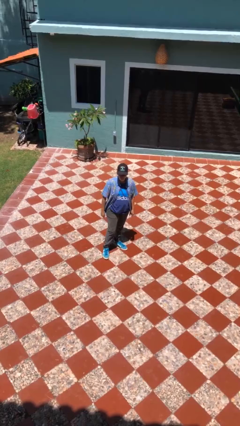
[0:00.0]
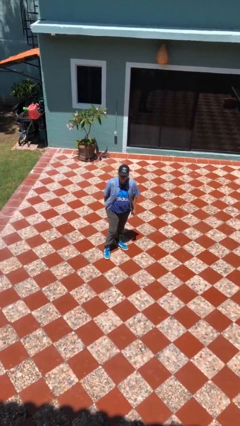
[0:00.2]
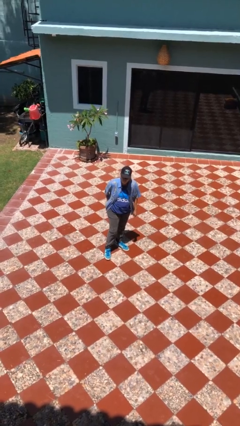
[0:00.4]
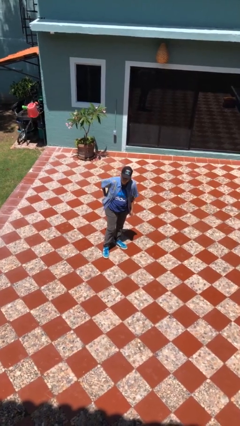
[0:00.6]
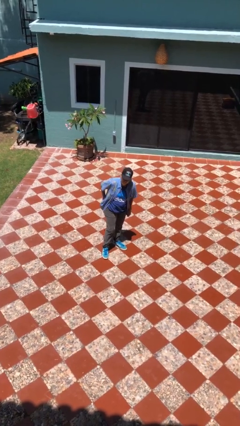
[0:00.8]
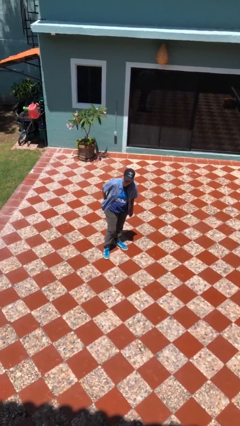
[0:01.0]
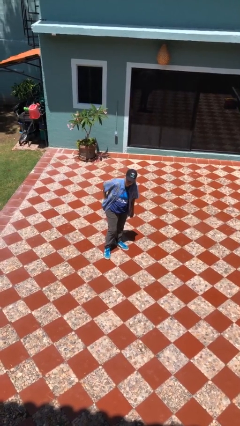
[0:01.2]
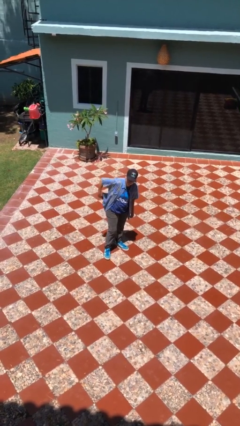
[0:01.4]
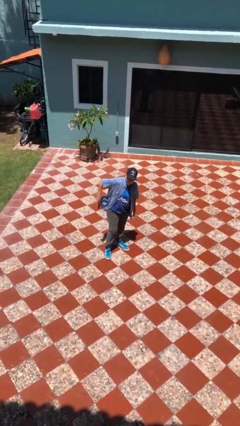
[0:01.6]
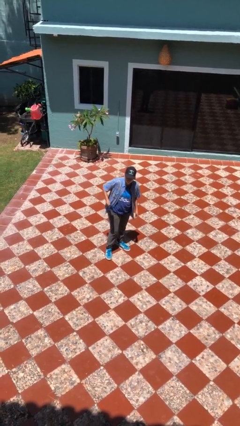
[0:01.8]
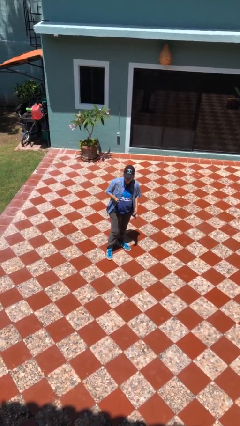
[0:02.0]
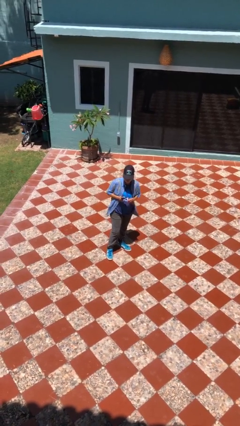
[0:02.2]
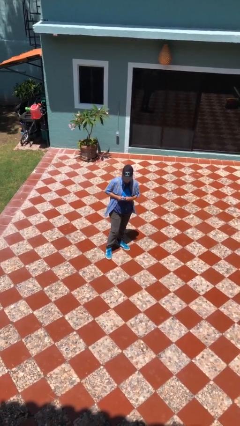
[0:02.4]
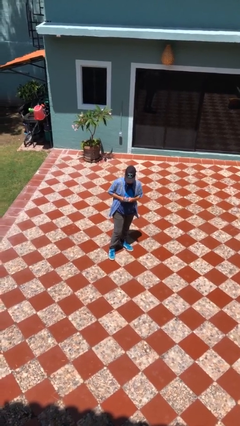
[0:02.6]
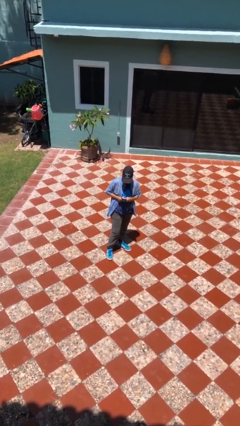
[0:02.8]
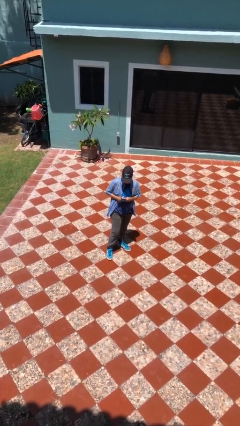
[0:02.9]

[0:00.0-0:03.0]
person takes phone from pocket

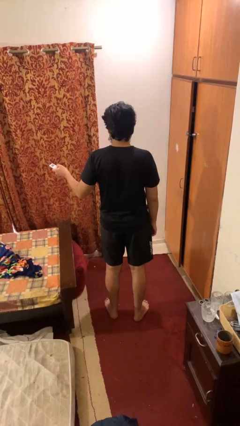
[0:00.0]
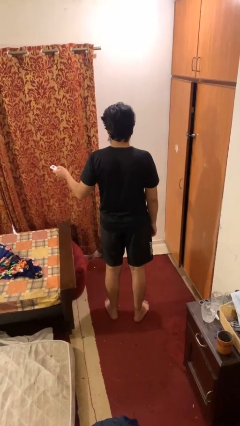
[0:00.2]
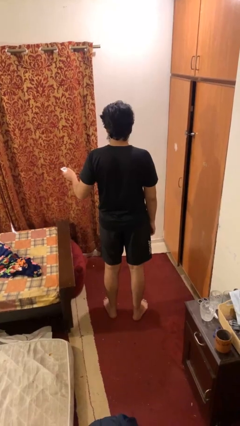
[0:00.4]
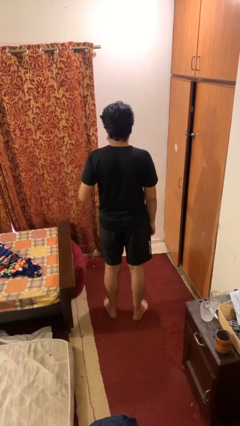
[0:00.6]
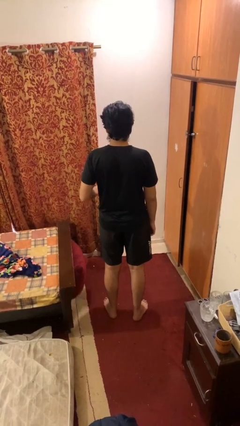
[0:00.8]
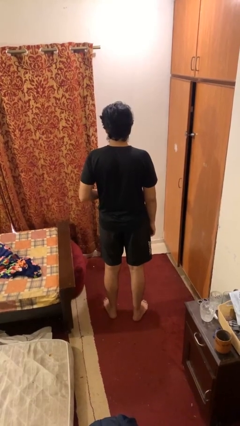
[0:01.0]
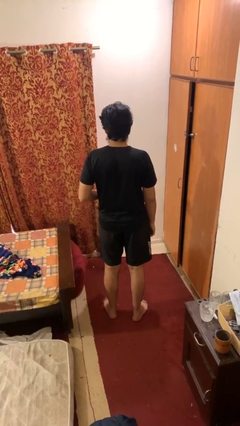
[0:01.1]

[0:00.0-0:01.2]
person uses television remote

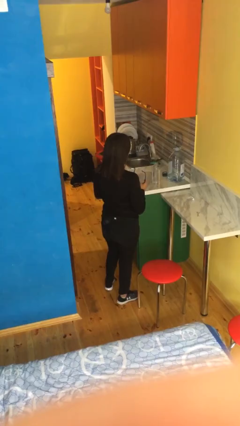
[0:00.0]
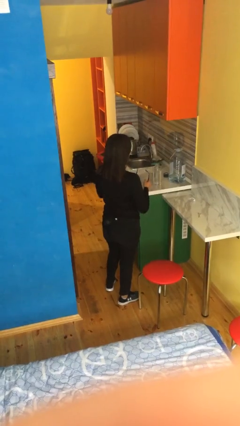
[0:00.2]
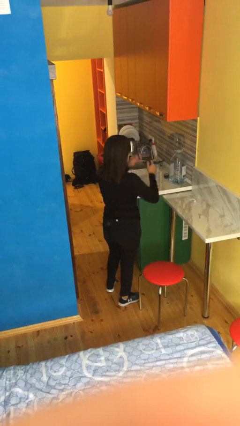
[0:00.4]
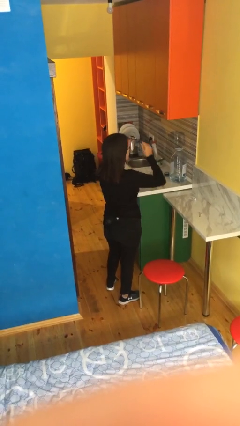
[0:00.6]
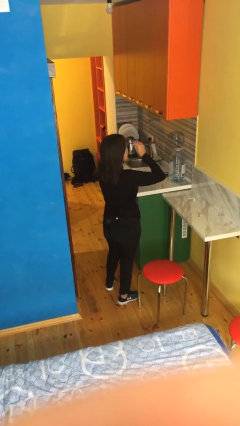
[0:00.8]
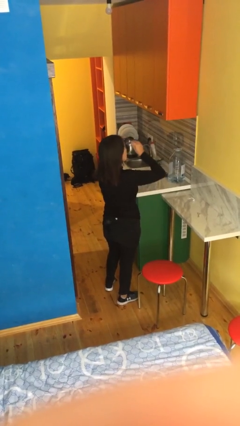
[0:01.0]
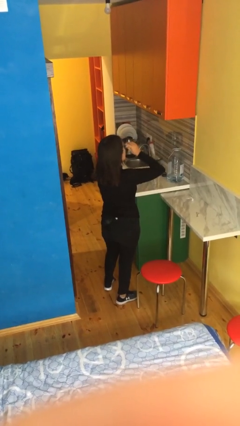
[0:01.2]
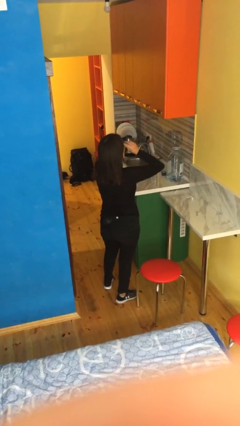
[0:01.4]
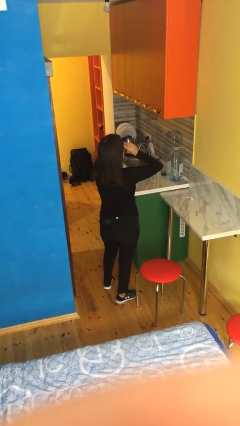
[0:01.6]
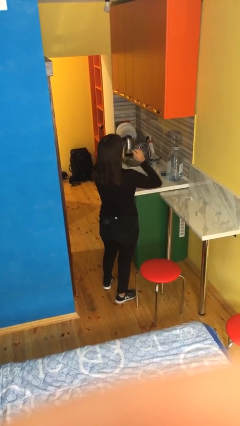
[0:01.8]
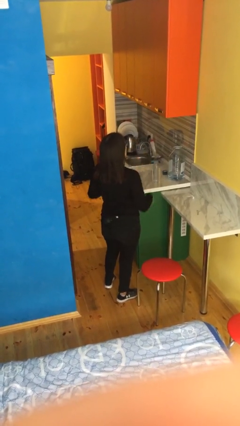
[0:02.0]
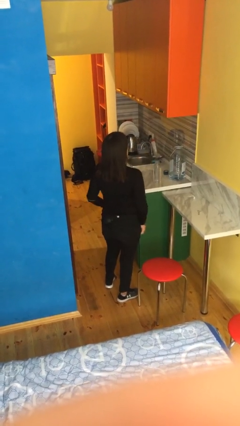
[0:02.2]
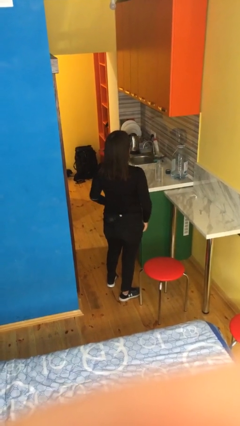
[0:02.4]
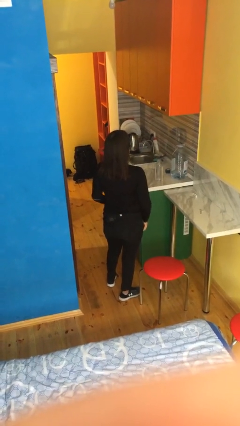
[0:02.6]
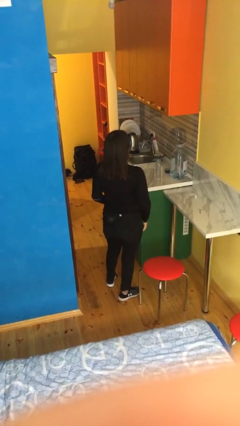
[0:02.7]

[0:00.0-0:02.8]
person puts on glasses

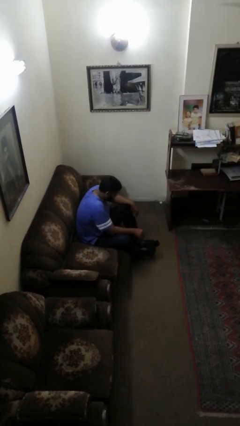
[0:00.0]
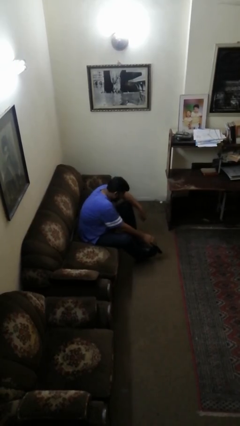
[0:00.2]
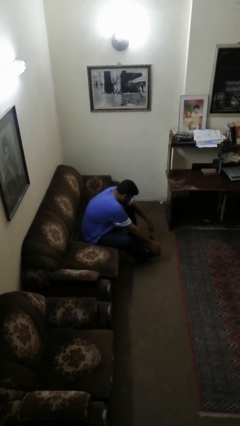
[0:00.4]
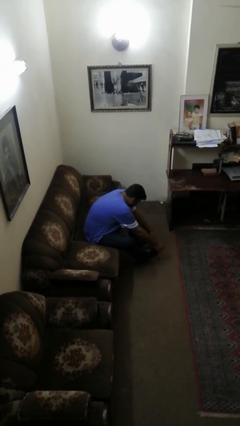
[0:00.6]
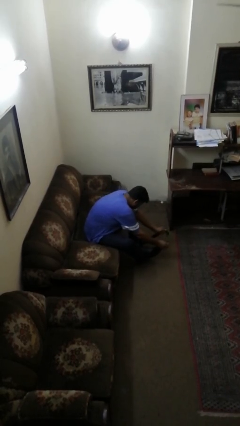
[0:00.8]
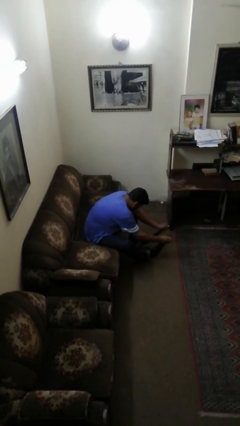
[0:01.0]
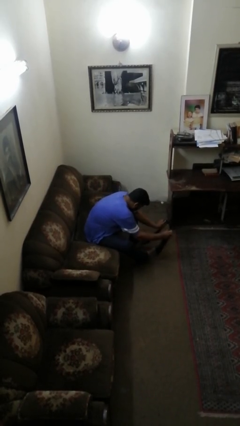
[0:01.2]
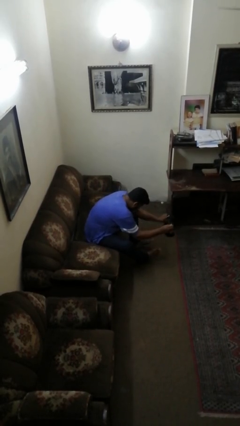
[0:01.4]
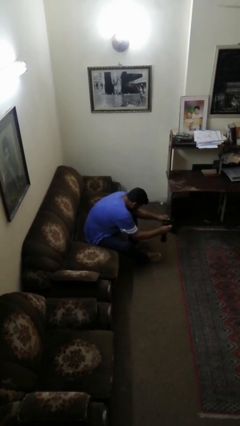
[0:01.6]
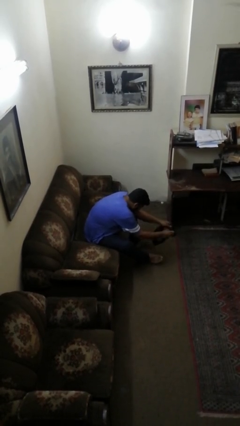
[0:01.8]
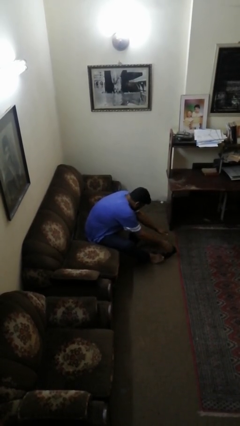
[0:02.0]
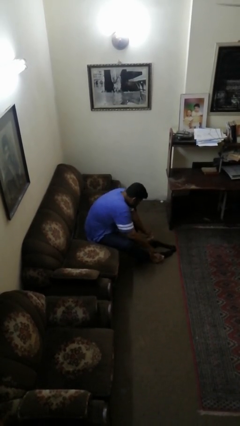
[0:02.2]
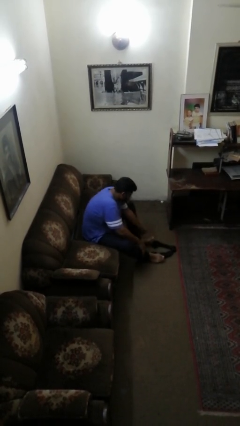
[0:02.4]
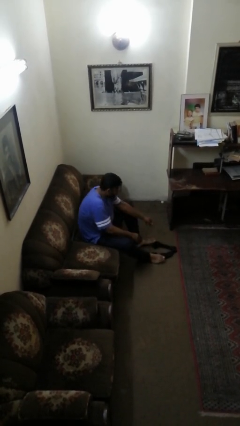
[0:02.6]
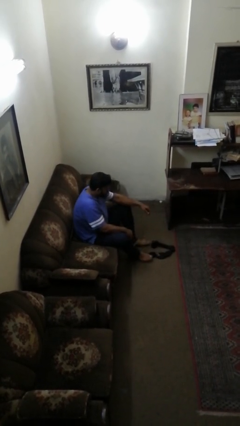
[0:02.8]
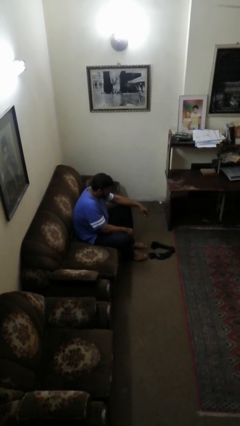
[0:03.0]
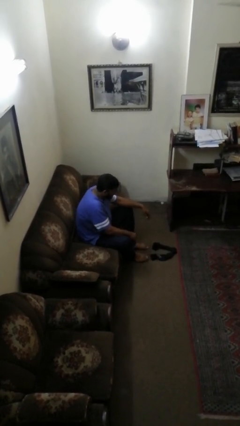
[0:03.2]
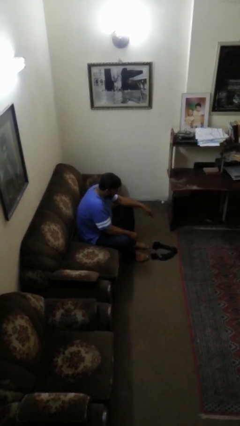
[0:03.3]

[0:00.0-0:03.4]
person takes off socks

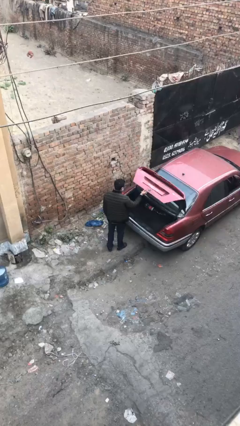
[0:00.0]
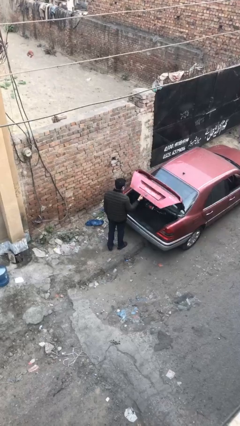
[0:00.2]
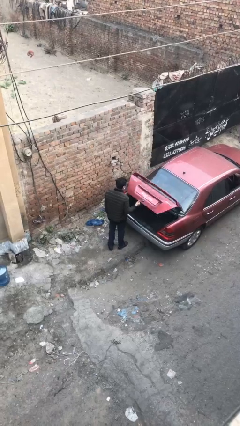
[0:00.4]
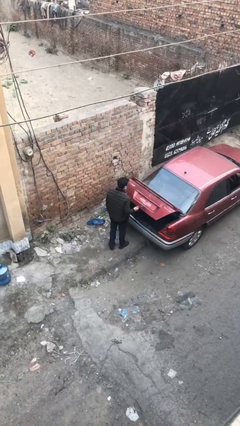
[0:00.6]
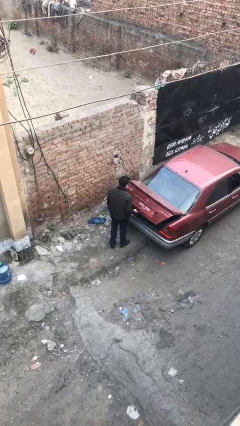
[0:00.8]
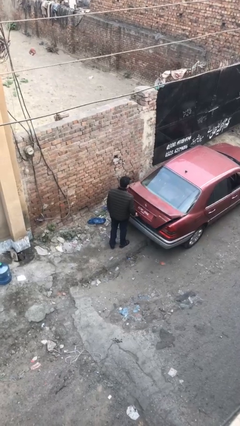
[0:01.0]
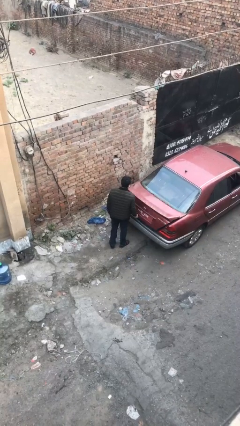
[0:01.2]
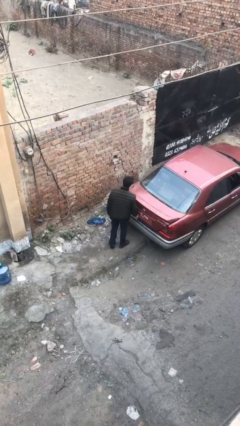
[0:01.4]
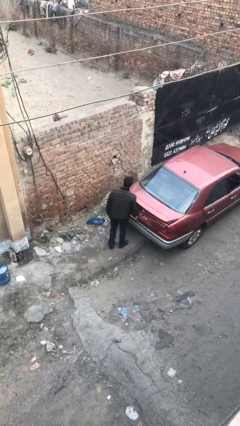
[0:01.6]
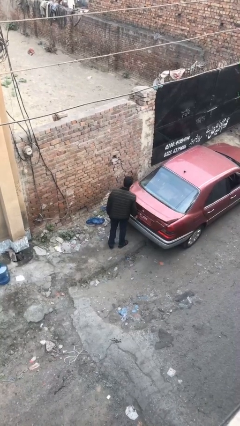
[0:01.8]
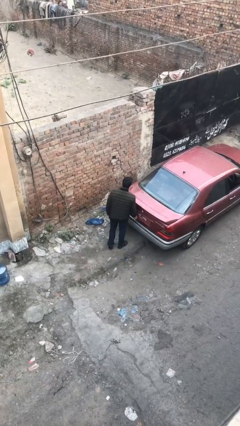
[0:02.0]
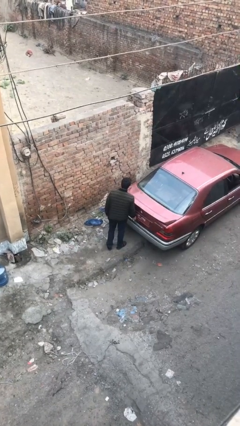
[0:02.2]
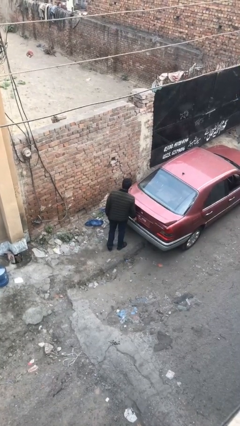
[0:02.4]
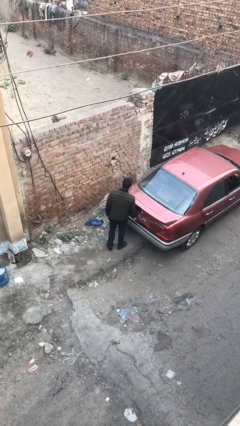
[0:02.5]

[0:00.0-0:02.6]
person closes car trunk

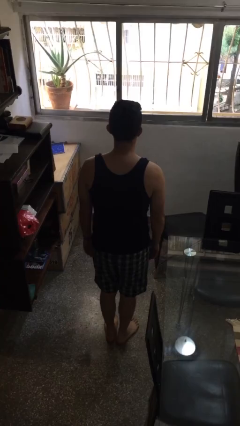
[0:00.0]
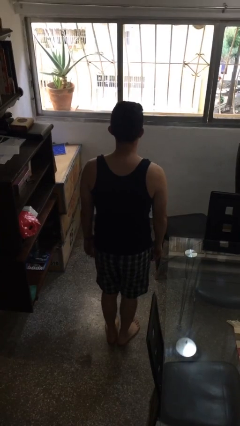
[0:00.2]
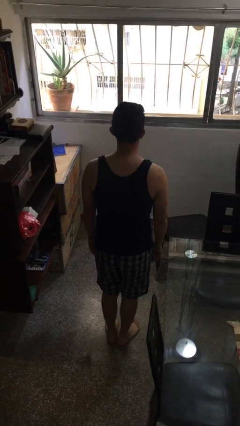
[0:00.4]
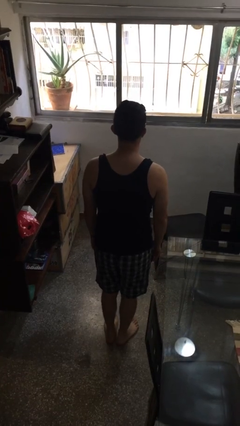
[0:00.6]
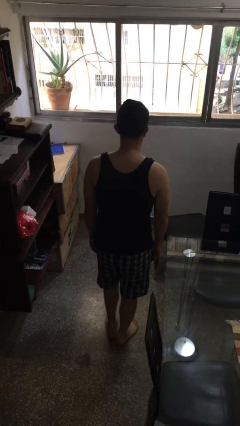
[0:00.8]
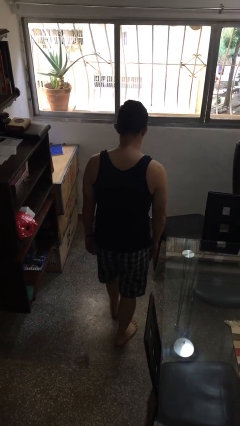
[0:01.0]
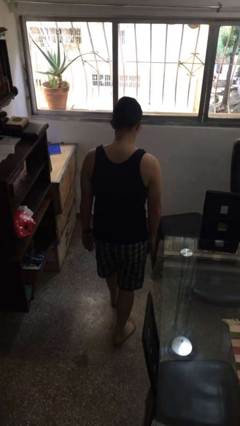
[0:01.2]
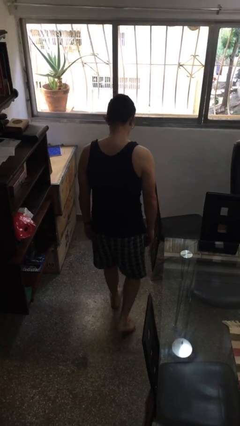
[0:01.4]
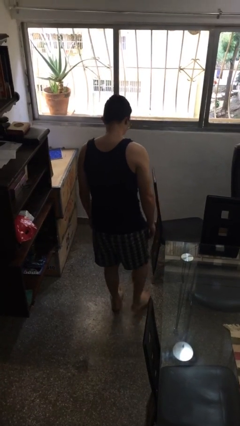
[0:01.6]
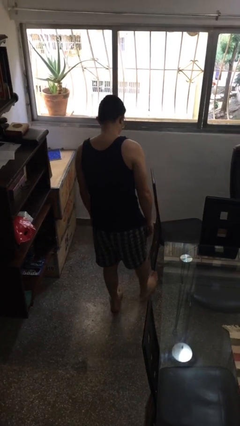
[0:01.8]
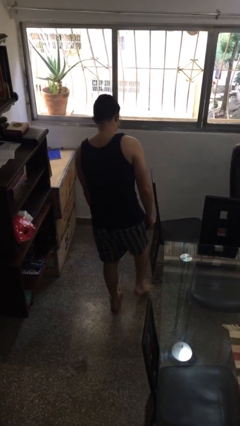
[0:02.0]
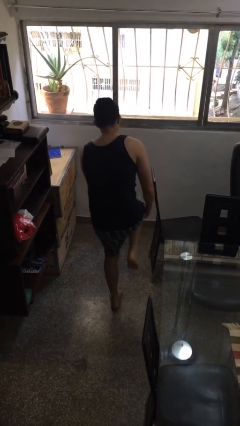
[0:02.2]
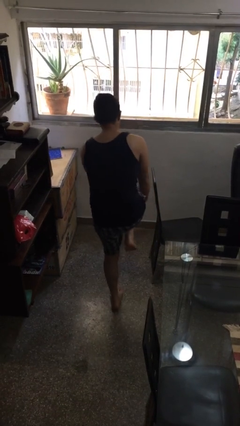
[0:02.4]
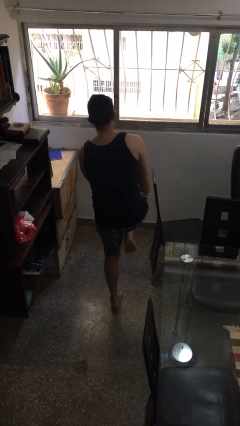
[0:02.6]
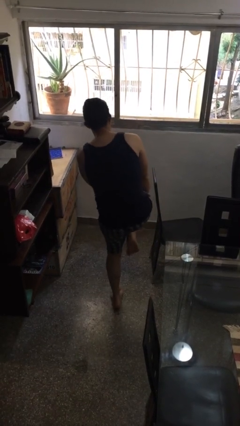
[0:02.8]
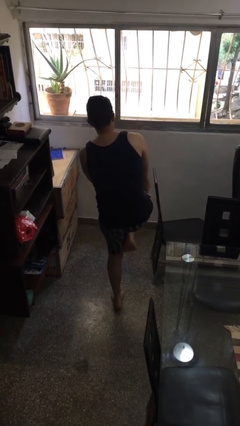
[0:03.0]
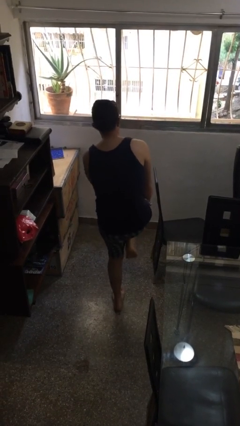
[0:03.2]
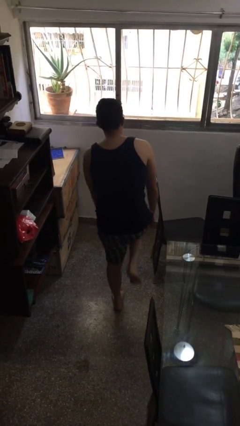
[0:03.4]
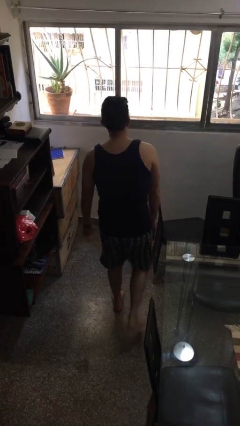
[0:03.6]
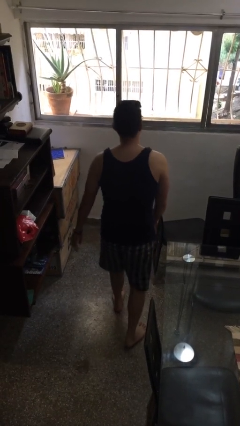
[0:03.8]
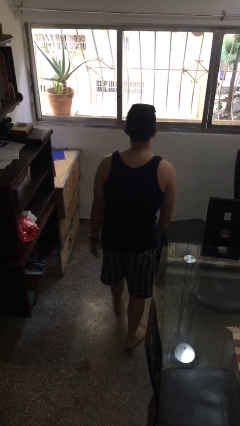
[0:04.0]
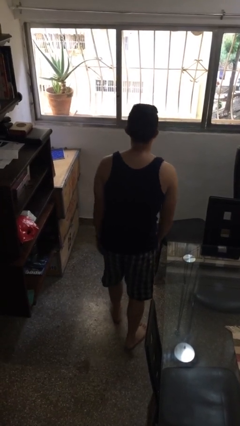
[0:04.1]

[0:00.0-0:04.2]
person stubs toe

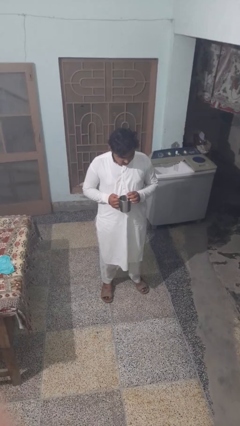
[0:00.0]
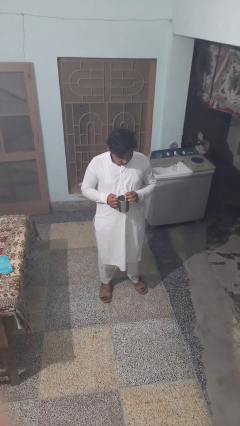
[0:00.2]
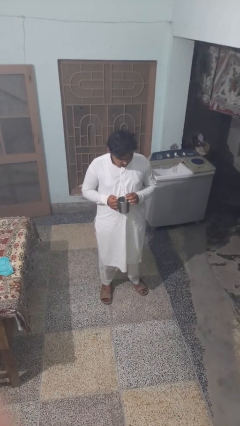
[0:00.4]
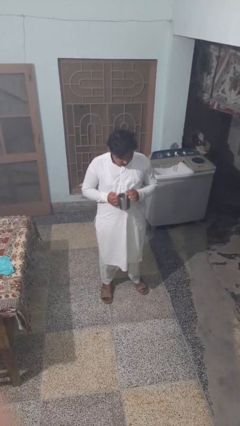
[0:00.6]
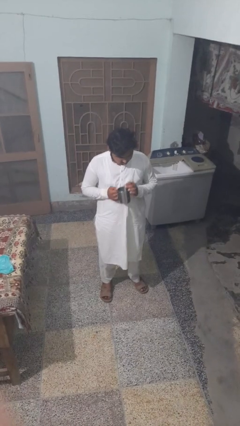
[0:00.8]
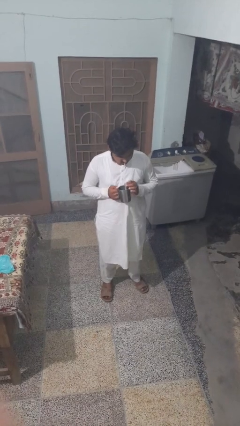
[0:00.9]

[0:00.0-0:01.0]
person drinks from straw
